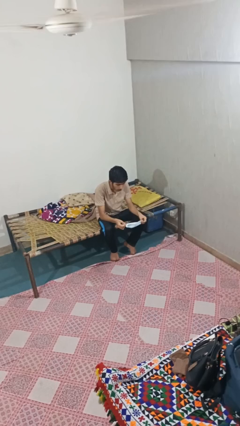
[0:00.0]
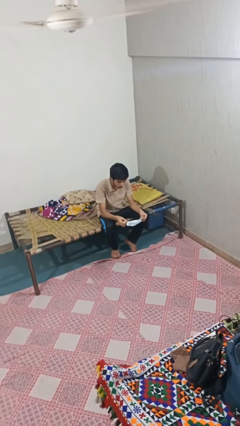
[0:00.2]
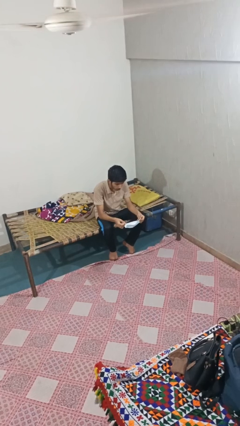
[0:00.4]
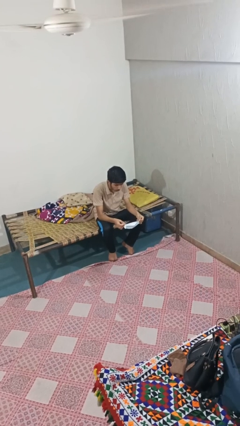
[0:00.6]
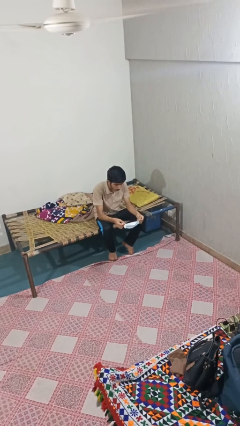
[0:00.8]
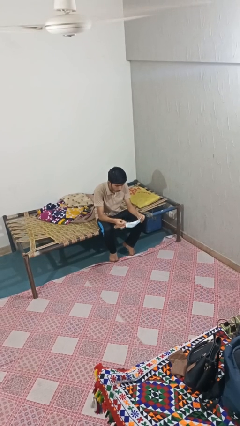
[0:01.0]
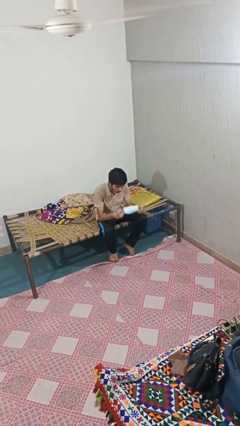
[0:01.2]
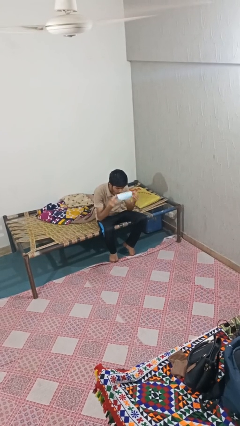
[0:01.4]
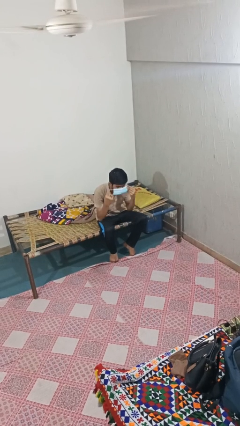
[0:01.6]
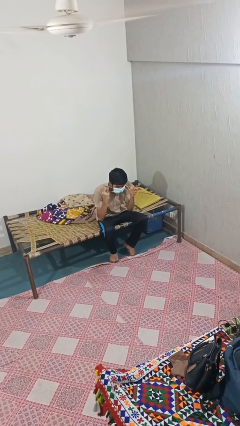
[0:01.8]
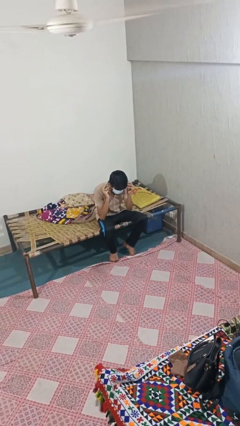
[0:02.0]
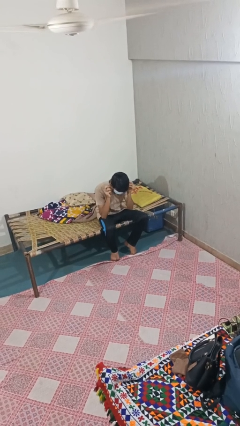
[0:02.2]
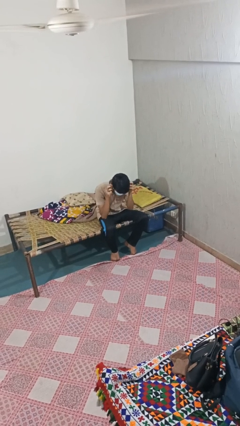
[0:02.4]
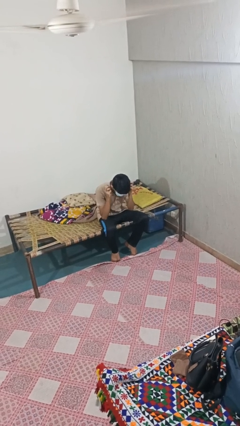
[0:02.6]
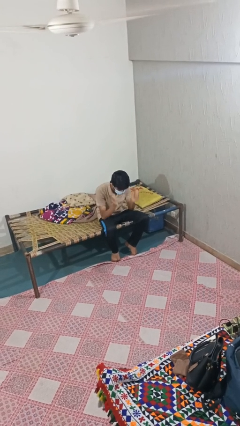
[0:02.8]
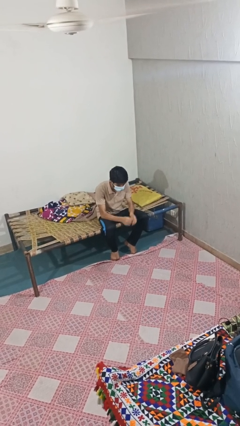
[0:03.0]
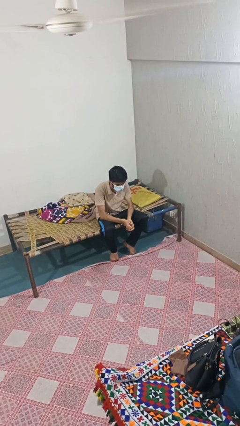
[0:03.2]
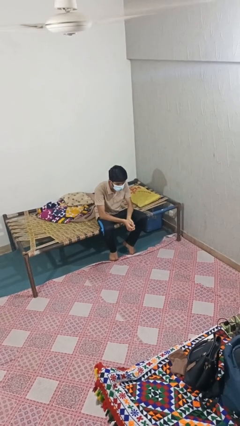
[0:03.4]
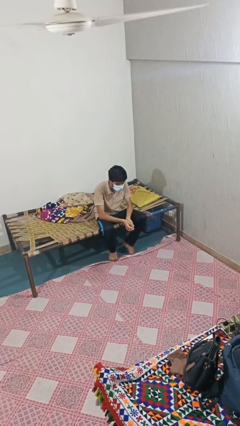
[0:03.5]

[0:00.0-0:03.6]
person puts on facemask

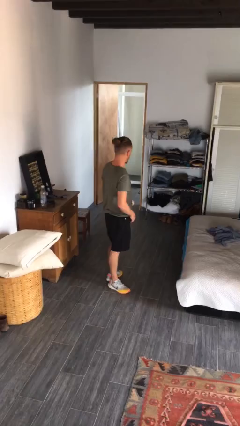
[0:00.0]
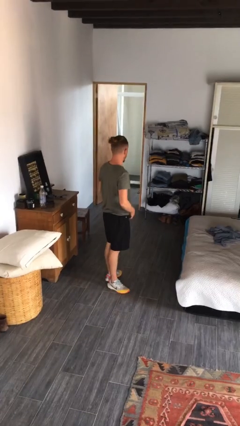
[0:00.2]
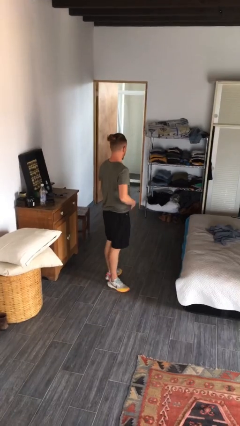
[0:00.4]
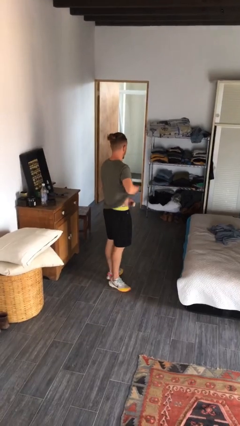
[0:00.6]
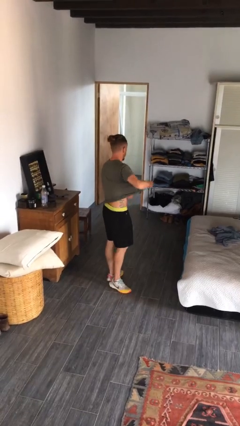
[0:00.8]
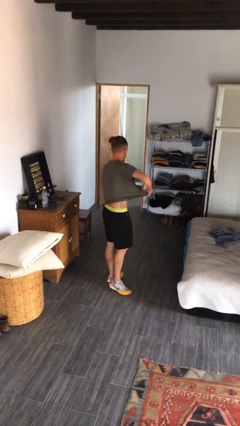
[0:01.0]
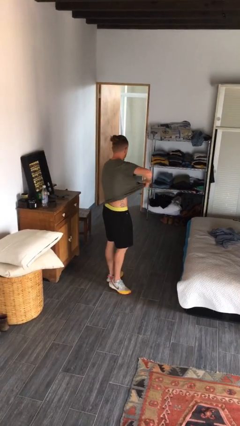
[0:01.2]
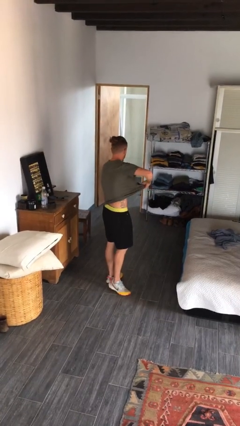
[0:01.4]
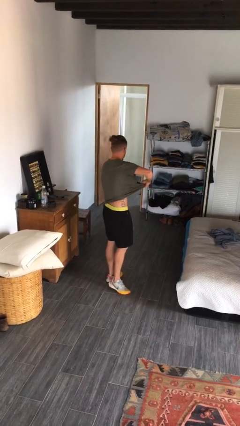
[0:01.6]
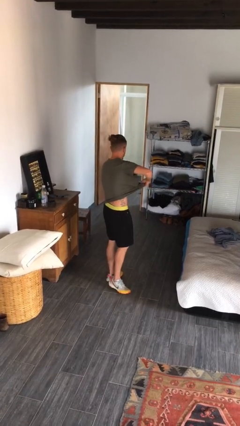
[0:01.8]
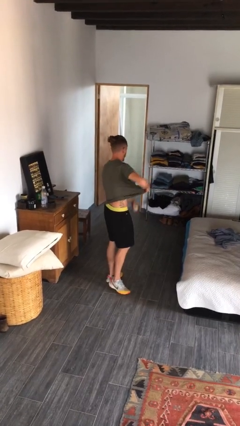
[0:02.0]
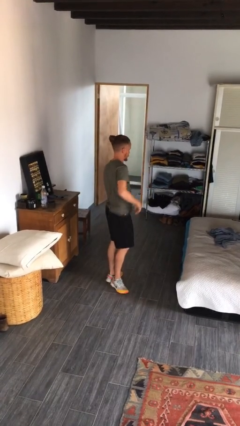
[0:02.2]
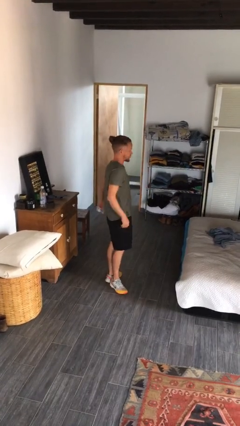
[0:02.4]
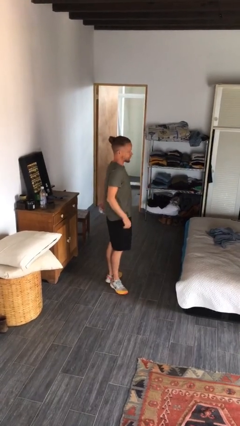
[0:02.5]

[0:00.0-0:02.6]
person applies deodorant

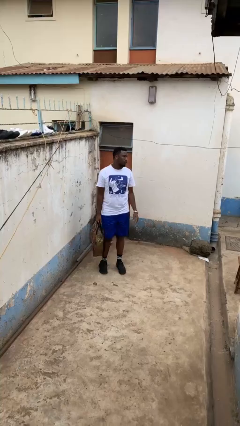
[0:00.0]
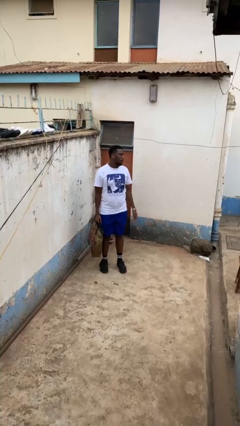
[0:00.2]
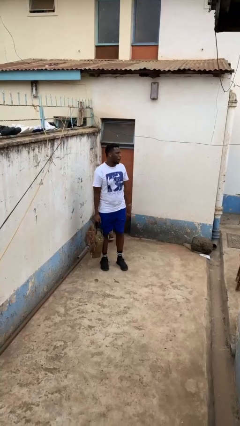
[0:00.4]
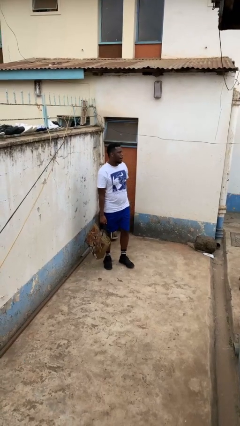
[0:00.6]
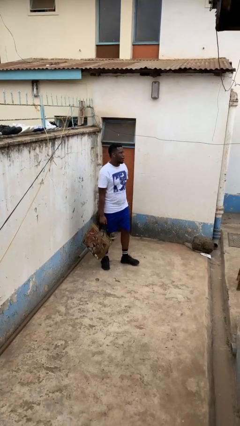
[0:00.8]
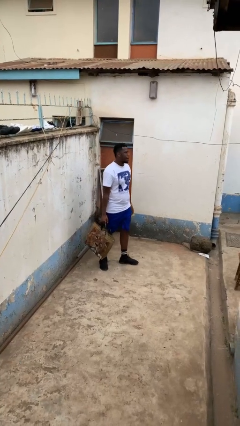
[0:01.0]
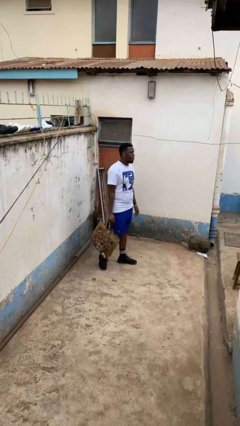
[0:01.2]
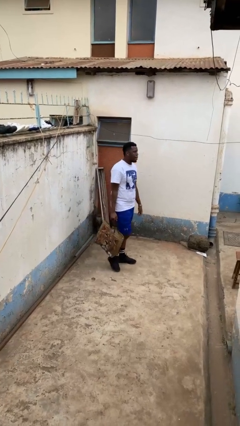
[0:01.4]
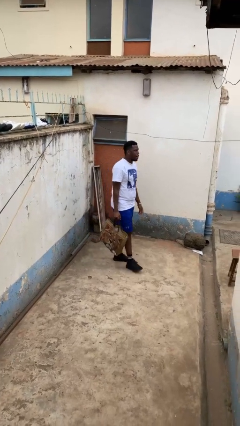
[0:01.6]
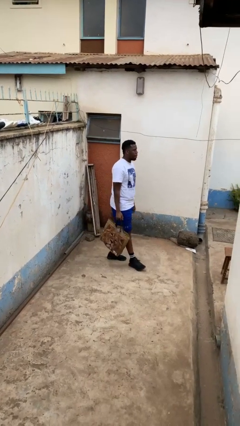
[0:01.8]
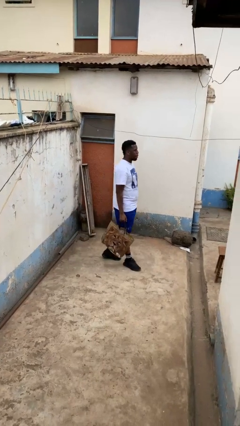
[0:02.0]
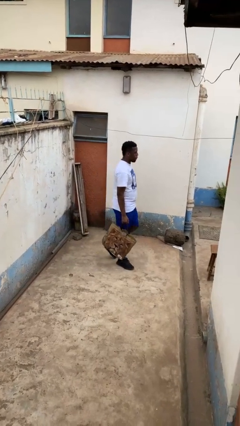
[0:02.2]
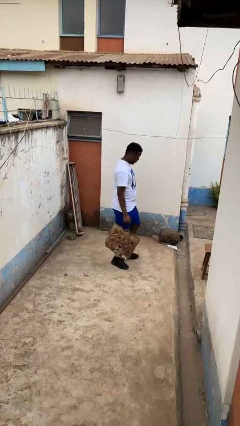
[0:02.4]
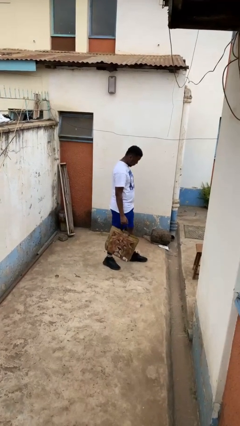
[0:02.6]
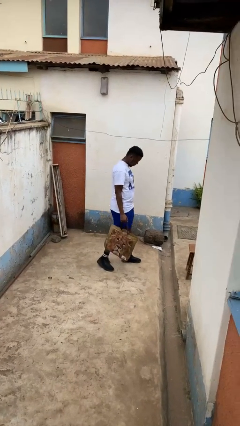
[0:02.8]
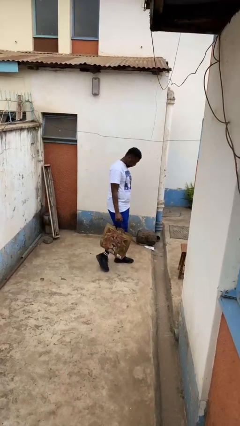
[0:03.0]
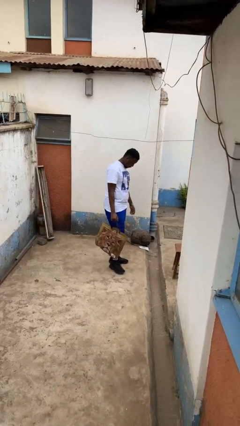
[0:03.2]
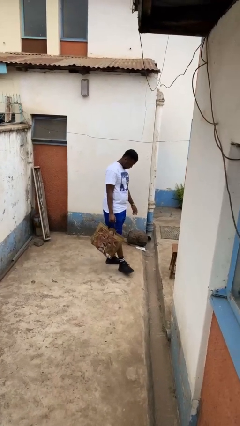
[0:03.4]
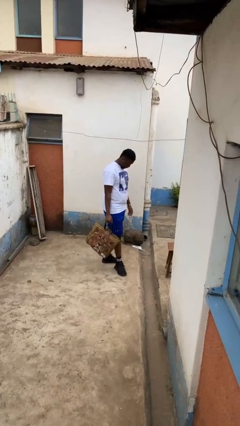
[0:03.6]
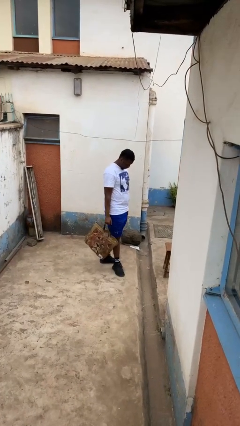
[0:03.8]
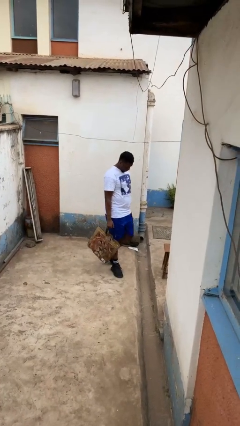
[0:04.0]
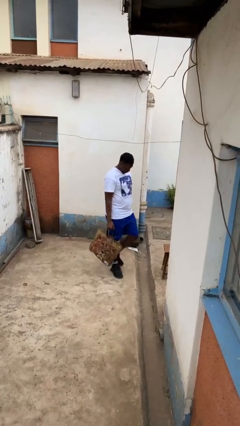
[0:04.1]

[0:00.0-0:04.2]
person carries groceries

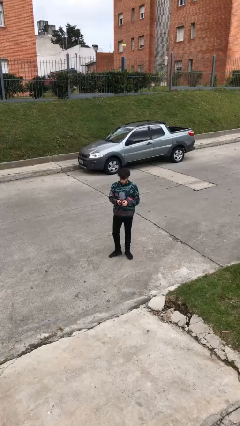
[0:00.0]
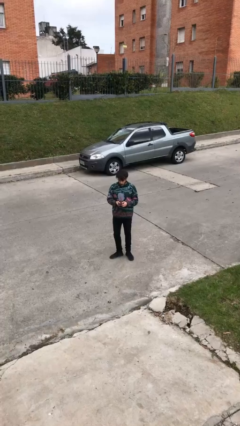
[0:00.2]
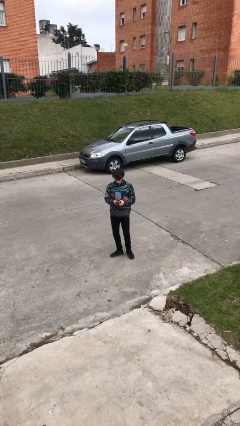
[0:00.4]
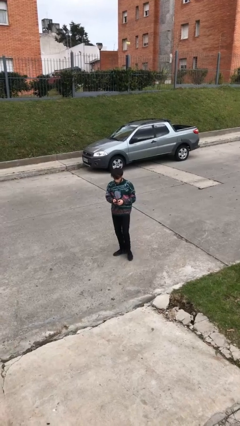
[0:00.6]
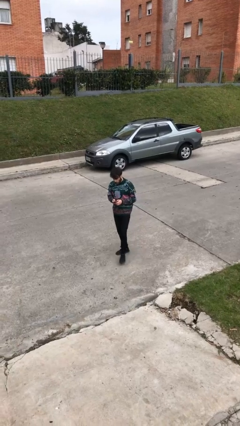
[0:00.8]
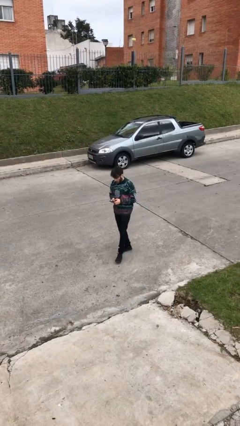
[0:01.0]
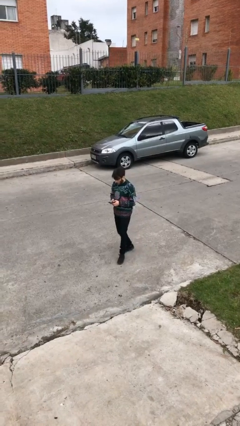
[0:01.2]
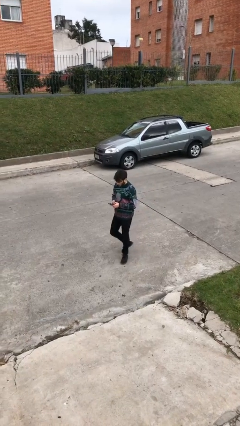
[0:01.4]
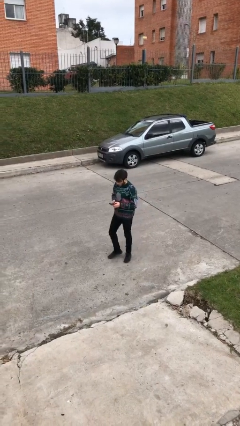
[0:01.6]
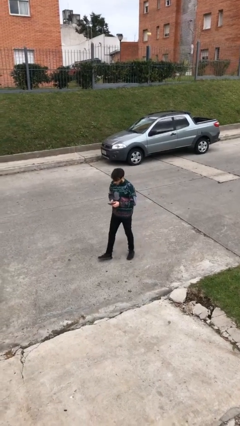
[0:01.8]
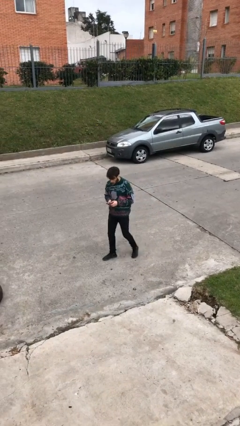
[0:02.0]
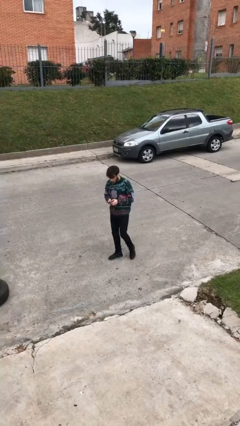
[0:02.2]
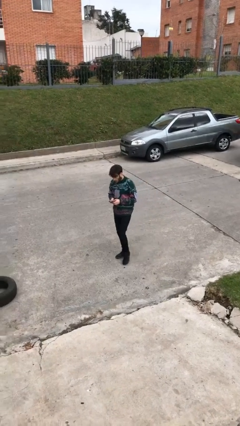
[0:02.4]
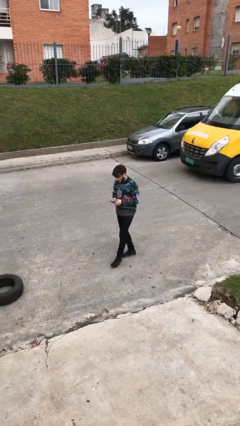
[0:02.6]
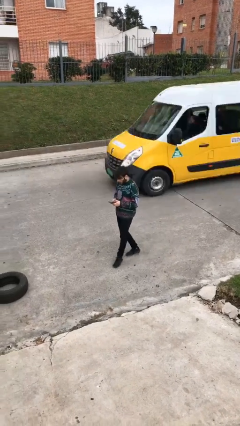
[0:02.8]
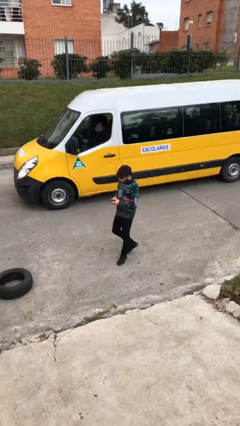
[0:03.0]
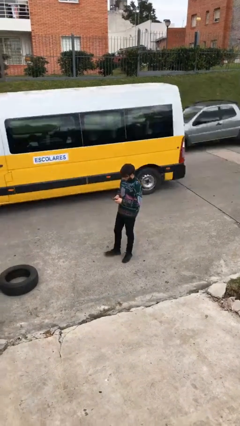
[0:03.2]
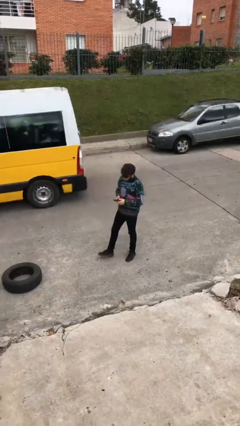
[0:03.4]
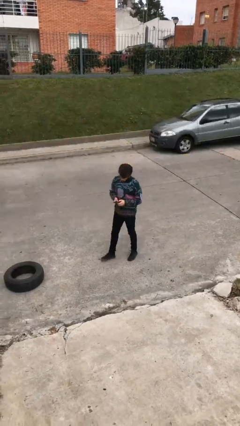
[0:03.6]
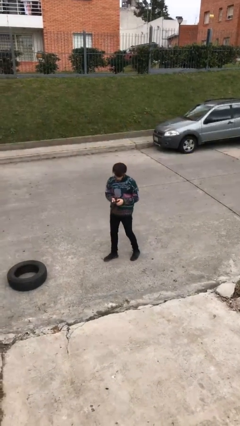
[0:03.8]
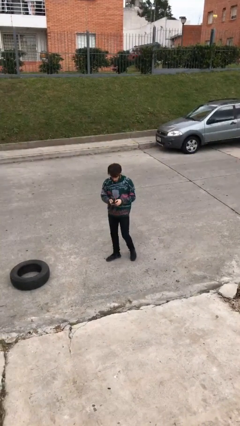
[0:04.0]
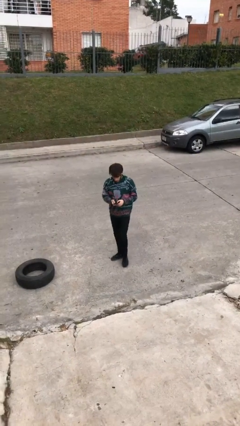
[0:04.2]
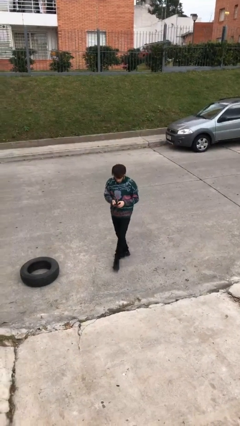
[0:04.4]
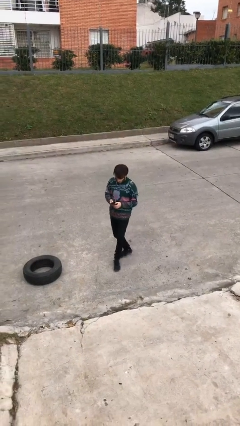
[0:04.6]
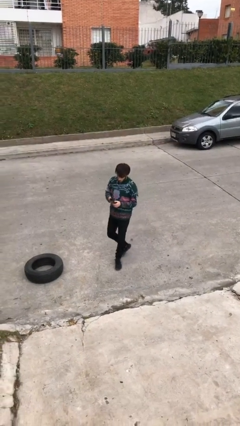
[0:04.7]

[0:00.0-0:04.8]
person texts on phone

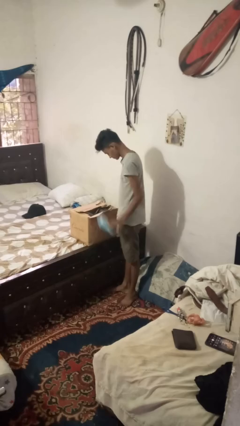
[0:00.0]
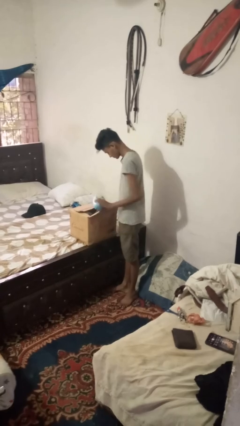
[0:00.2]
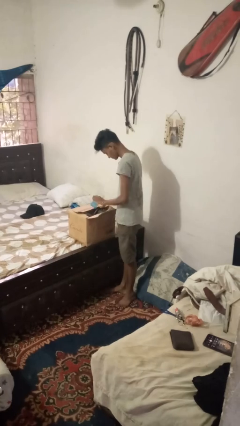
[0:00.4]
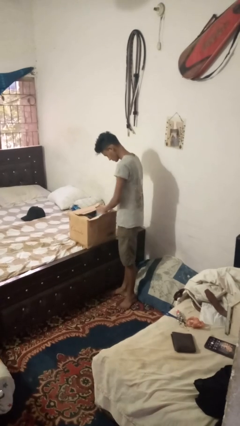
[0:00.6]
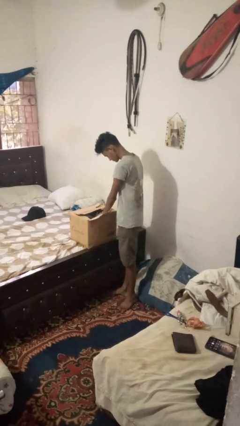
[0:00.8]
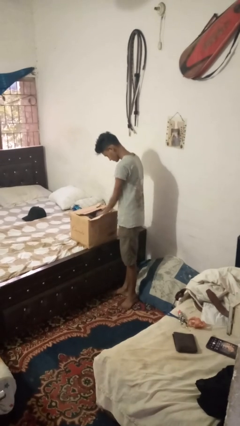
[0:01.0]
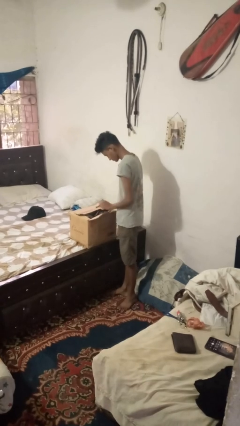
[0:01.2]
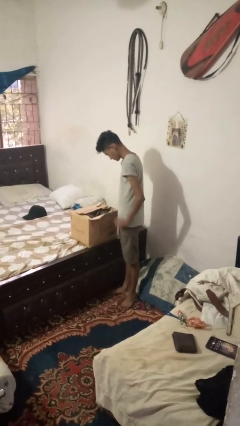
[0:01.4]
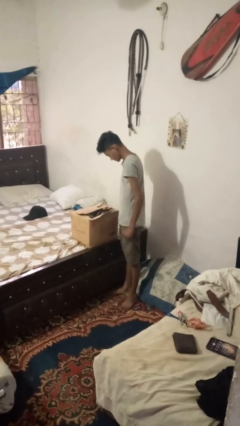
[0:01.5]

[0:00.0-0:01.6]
person puts object into box

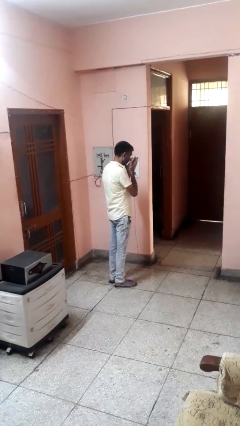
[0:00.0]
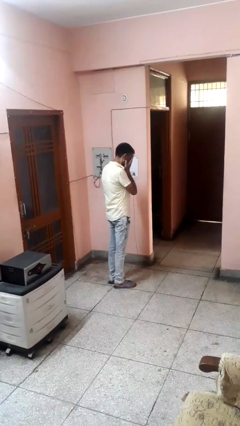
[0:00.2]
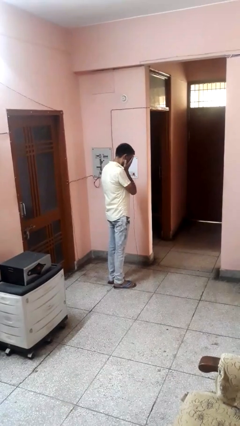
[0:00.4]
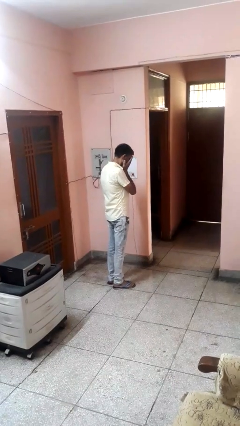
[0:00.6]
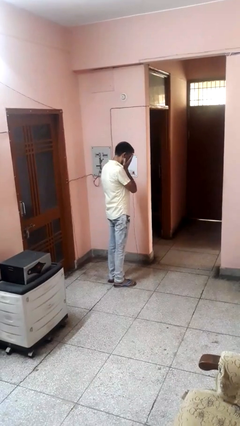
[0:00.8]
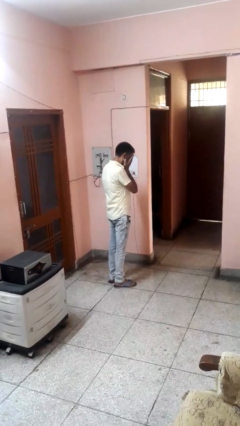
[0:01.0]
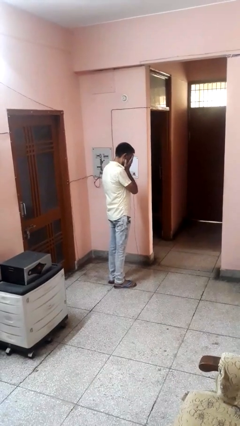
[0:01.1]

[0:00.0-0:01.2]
person covers face with hands
